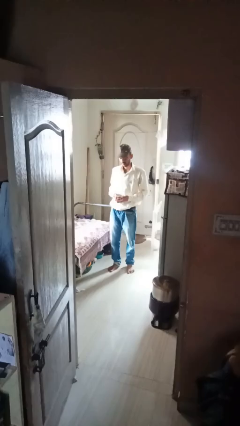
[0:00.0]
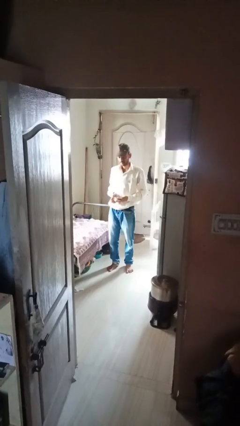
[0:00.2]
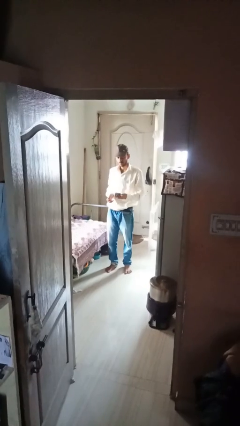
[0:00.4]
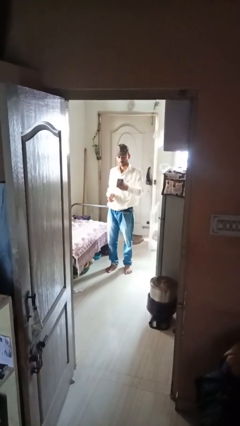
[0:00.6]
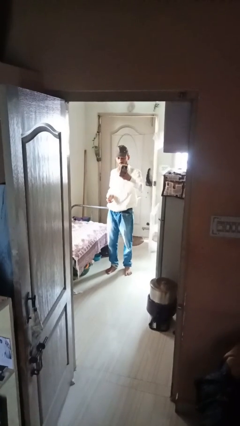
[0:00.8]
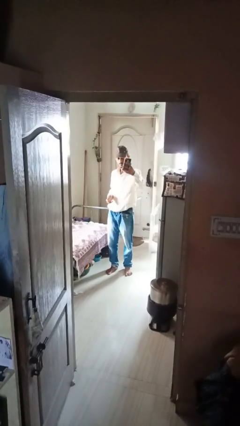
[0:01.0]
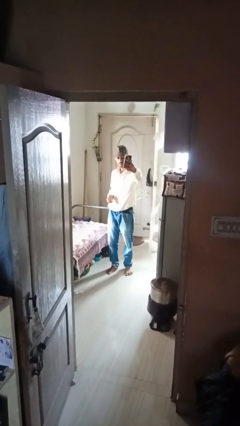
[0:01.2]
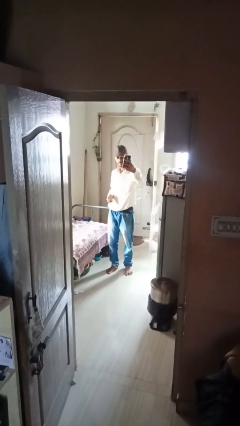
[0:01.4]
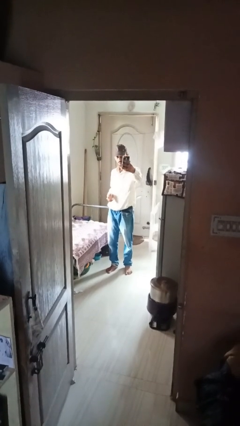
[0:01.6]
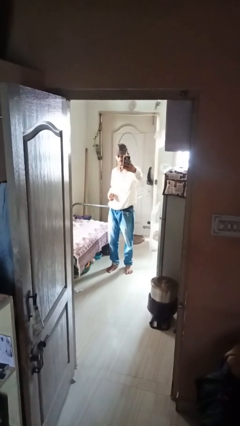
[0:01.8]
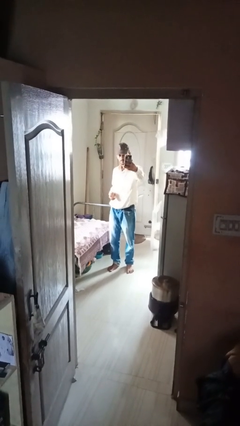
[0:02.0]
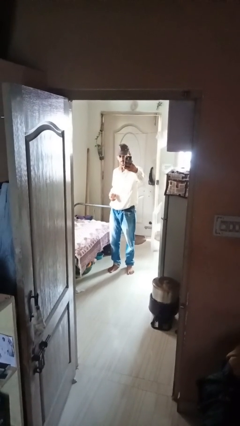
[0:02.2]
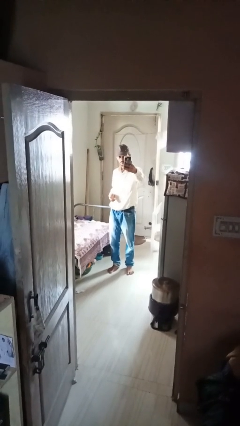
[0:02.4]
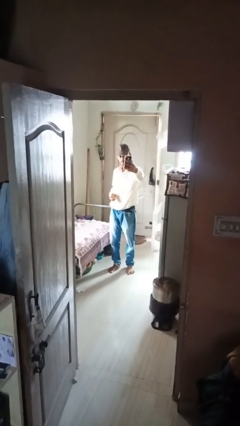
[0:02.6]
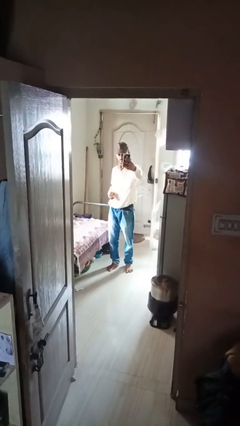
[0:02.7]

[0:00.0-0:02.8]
person takes selfie

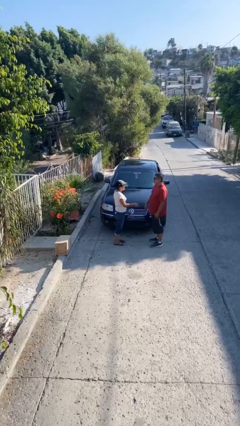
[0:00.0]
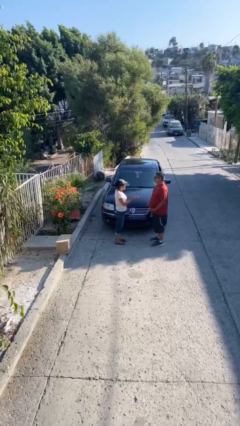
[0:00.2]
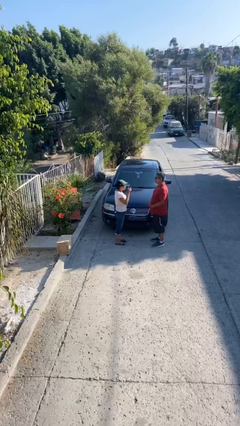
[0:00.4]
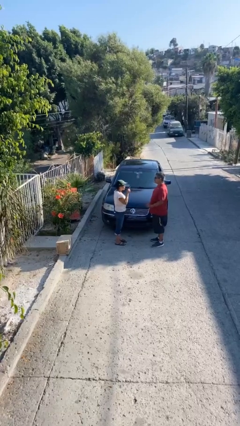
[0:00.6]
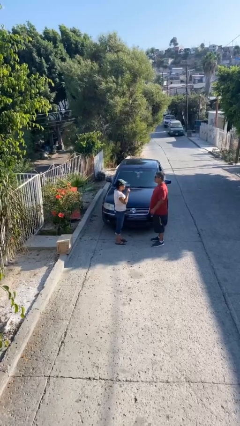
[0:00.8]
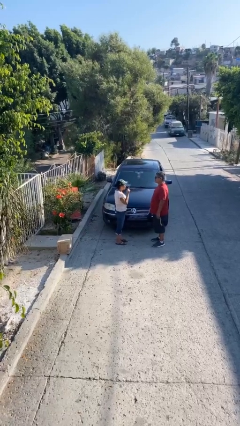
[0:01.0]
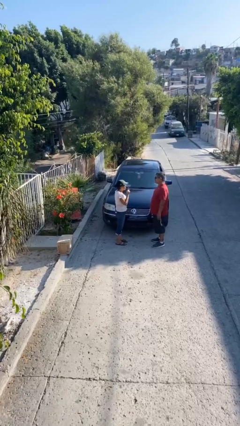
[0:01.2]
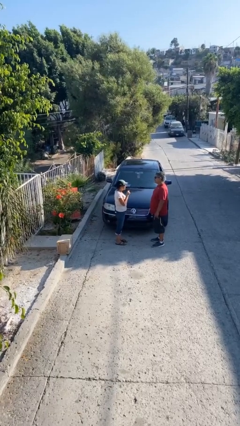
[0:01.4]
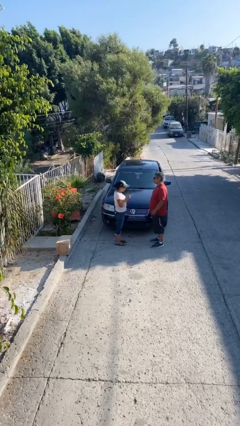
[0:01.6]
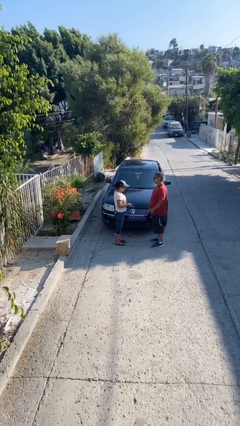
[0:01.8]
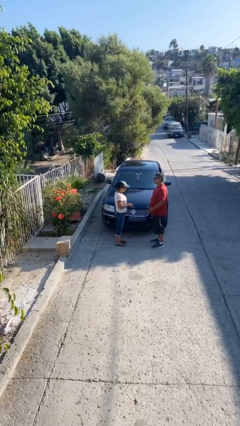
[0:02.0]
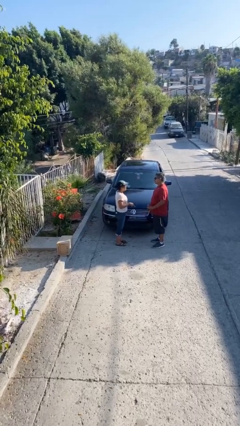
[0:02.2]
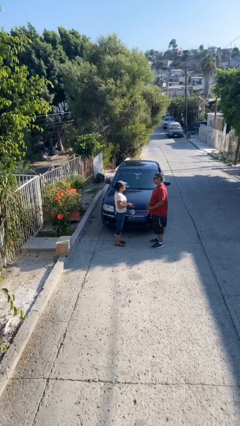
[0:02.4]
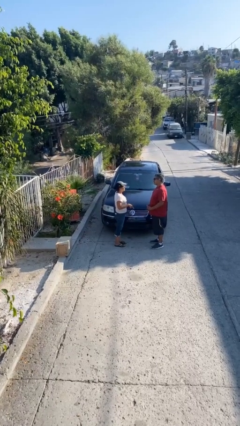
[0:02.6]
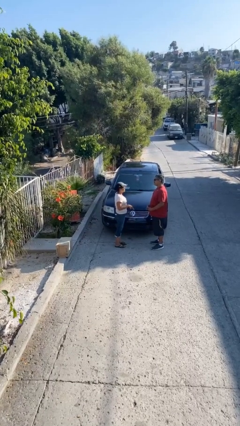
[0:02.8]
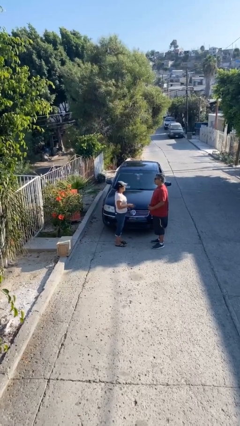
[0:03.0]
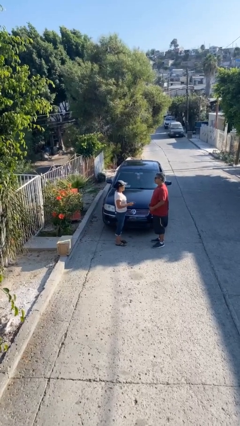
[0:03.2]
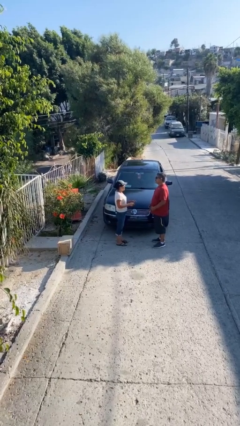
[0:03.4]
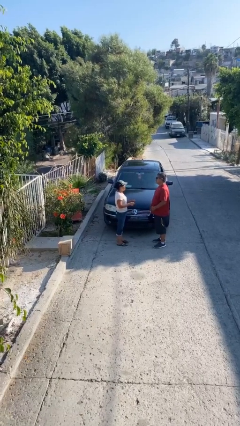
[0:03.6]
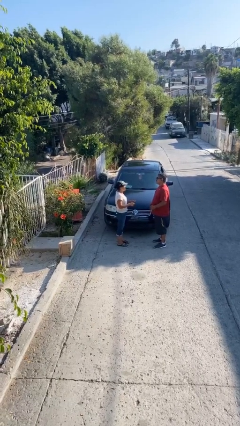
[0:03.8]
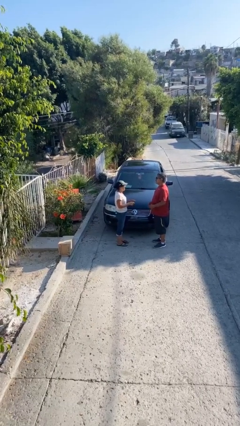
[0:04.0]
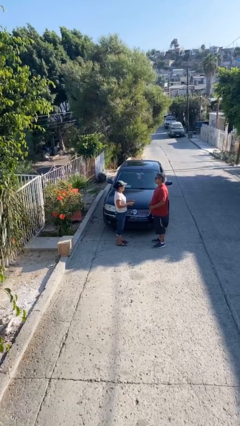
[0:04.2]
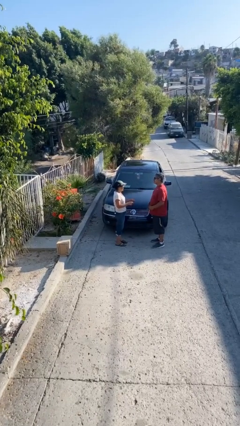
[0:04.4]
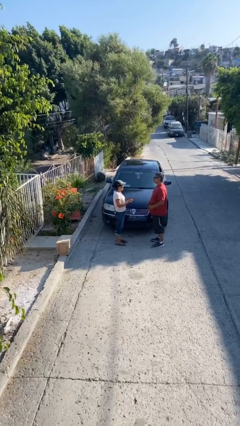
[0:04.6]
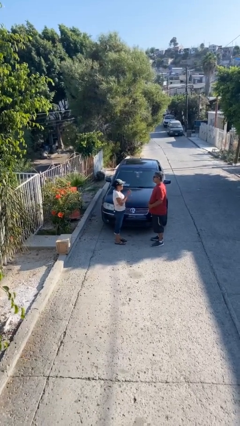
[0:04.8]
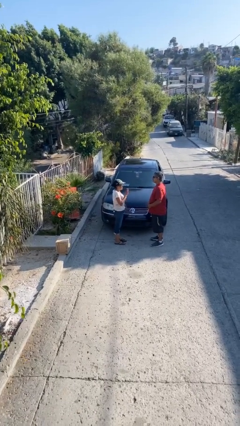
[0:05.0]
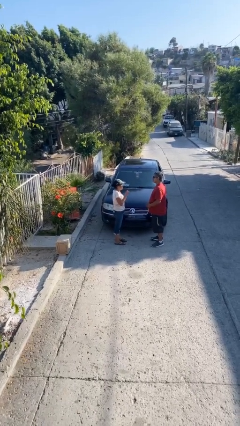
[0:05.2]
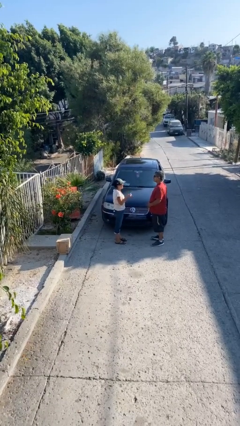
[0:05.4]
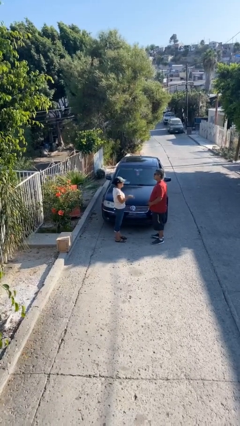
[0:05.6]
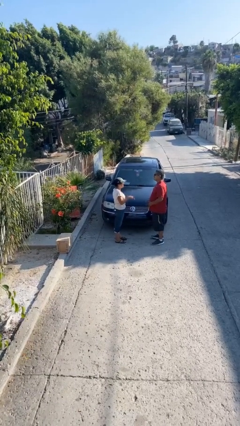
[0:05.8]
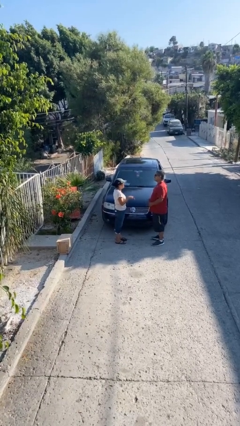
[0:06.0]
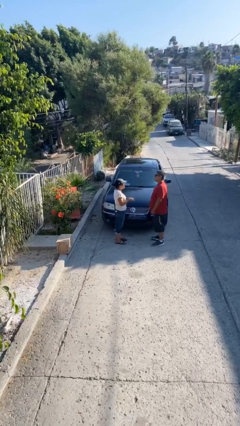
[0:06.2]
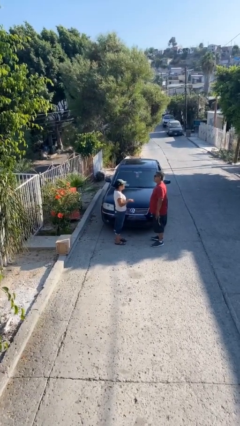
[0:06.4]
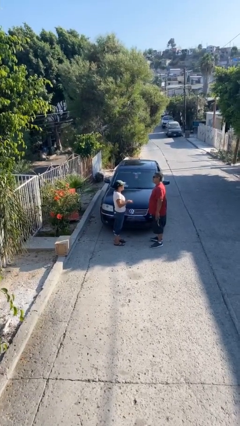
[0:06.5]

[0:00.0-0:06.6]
person talks to person

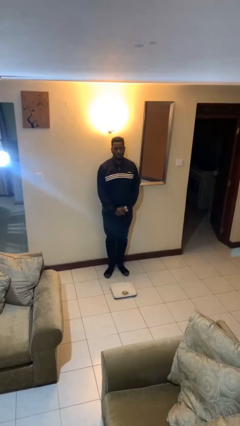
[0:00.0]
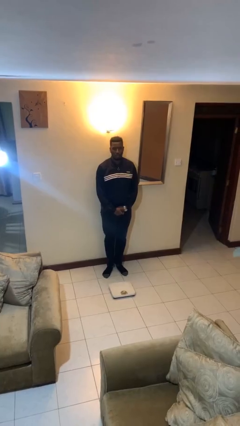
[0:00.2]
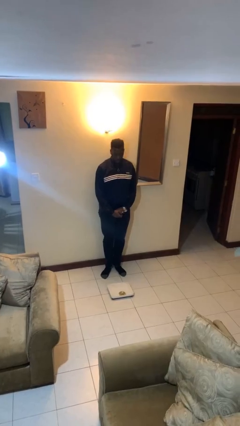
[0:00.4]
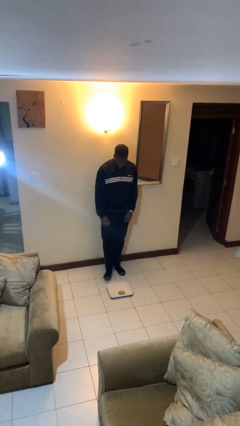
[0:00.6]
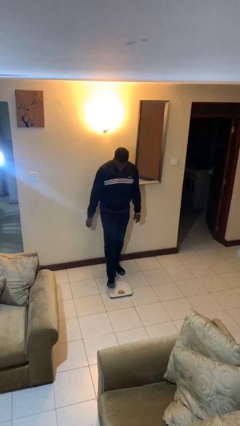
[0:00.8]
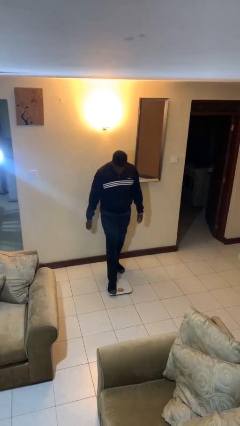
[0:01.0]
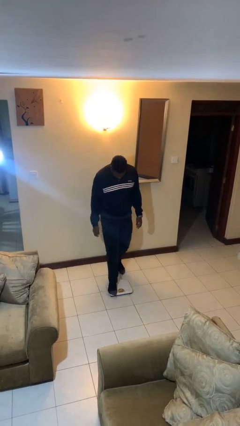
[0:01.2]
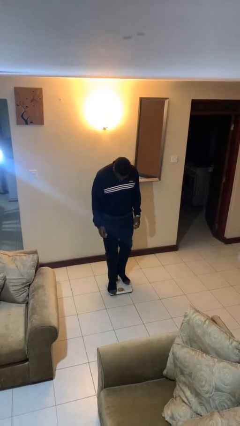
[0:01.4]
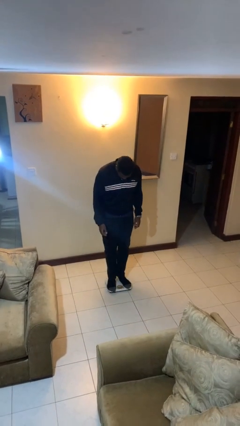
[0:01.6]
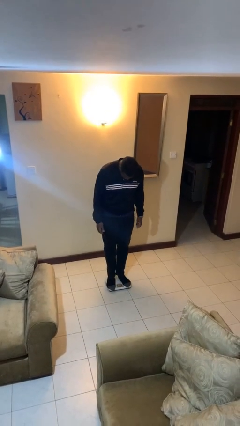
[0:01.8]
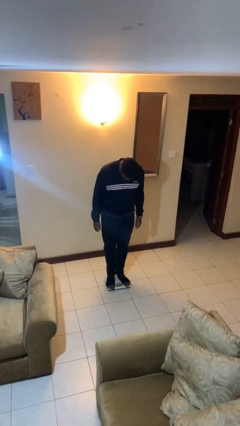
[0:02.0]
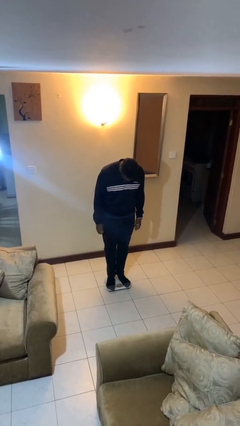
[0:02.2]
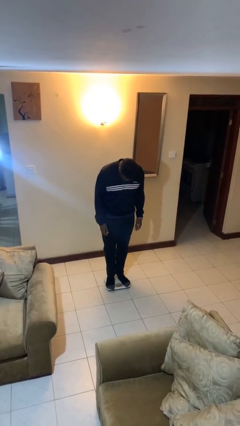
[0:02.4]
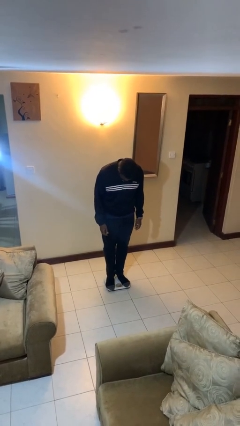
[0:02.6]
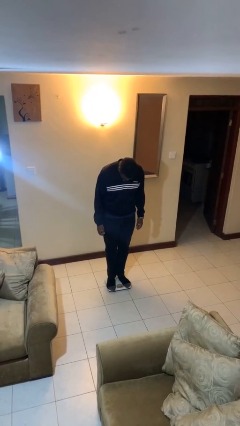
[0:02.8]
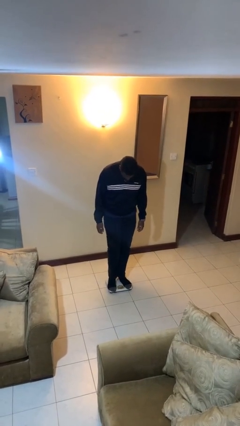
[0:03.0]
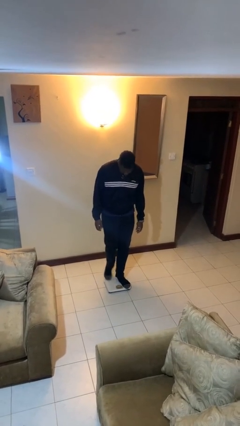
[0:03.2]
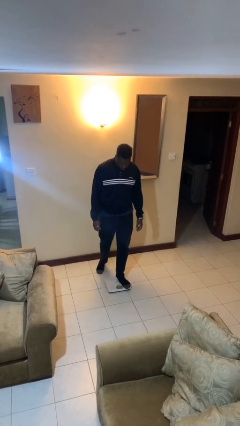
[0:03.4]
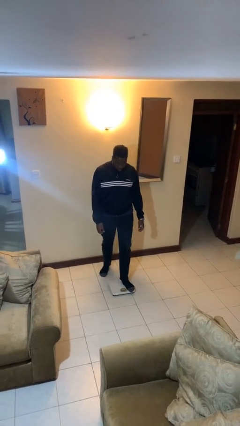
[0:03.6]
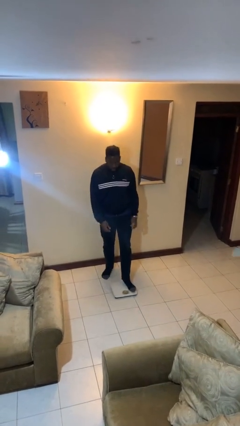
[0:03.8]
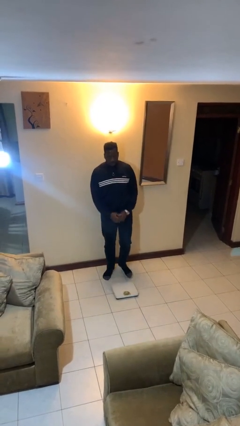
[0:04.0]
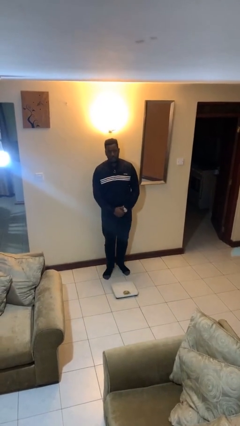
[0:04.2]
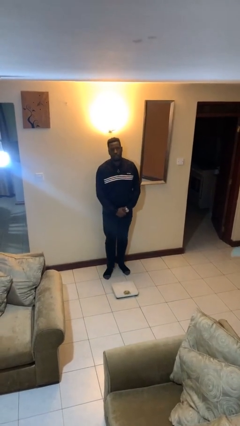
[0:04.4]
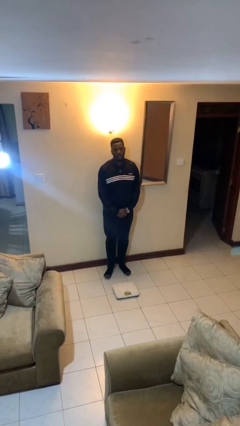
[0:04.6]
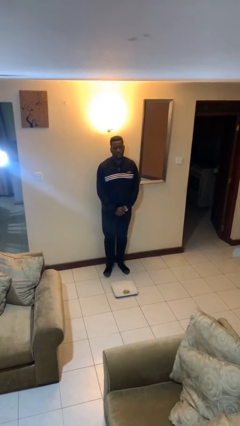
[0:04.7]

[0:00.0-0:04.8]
person uses bodyweight scale

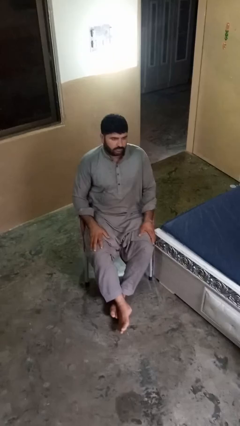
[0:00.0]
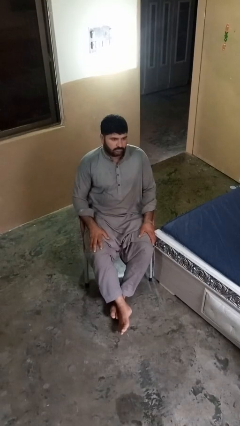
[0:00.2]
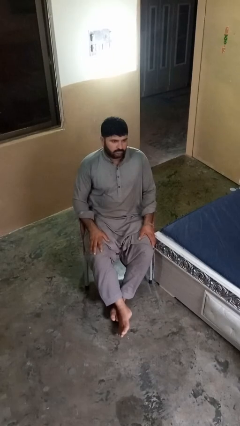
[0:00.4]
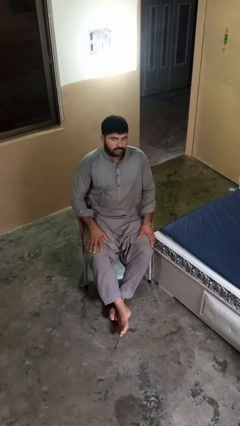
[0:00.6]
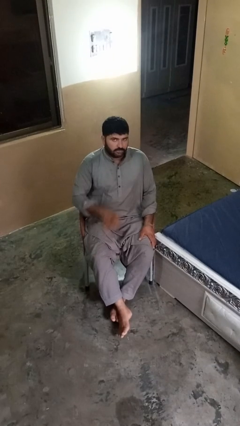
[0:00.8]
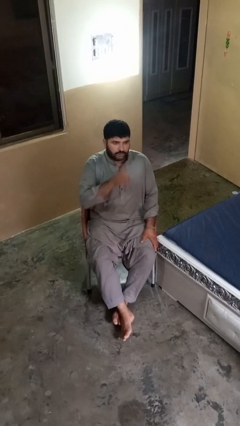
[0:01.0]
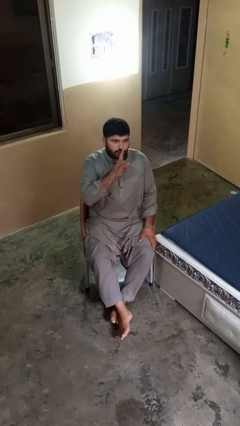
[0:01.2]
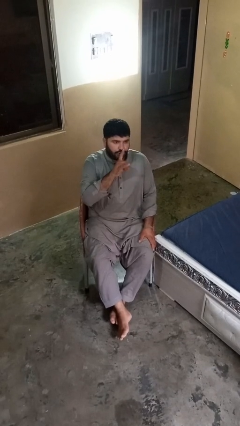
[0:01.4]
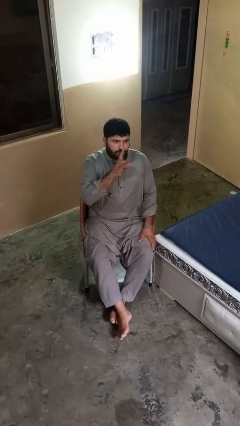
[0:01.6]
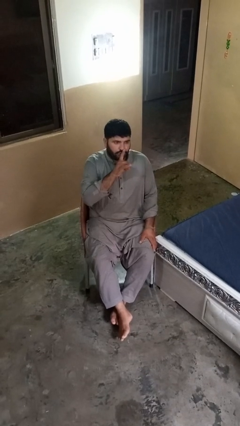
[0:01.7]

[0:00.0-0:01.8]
person gestures be quiet

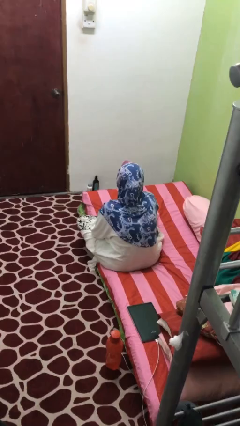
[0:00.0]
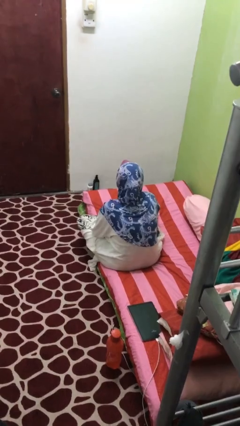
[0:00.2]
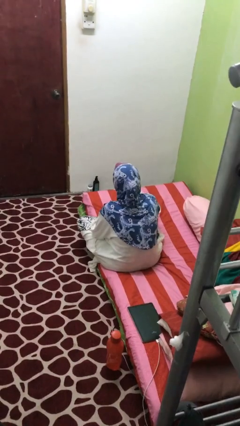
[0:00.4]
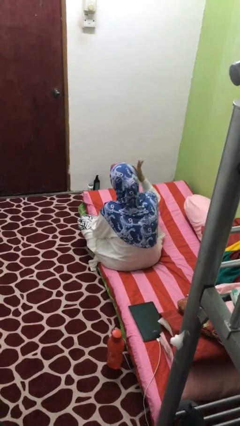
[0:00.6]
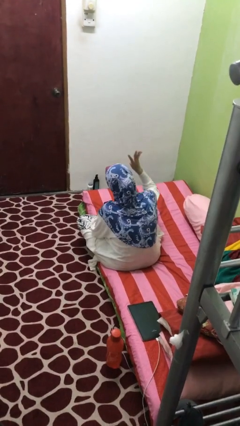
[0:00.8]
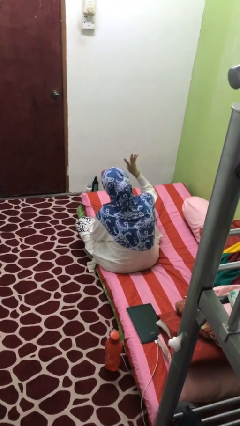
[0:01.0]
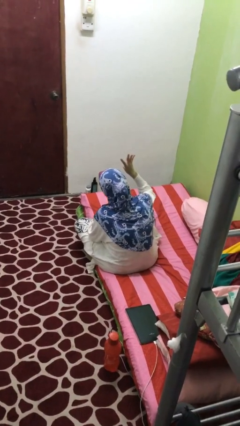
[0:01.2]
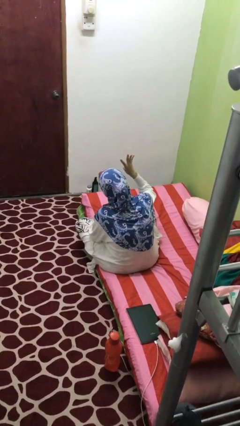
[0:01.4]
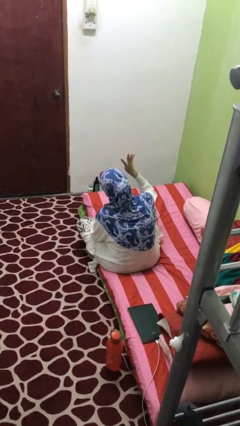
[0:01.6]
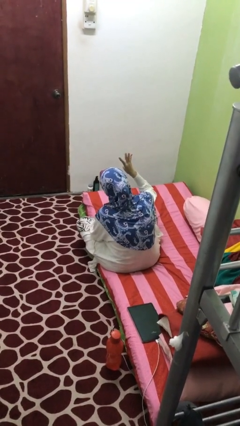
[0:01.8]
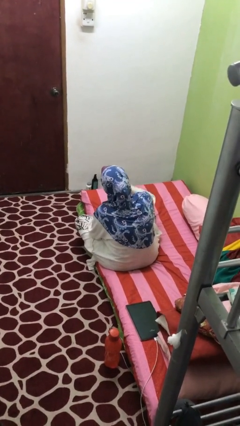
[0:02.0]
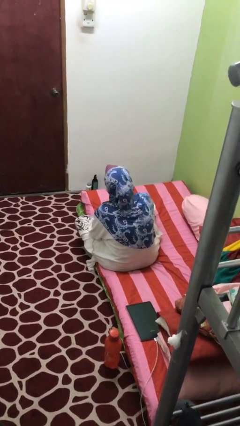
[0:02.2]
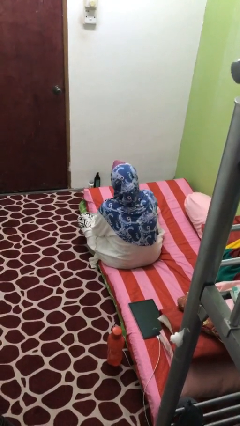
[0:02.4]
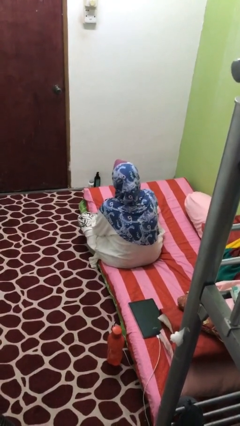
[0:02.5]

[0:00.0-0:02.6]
person gestures number four
